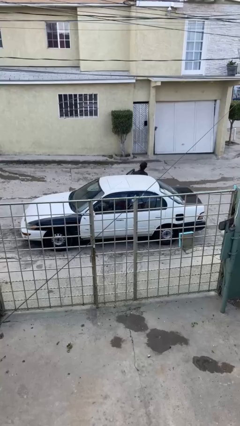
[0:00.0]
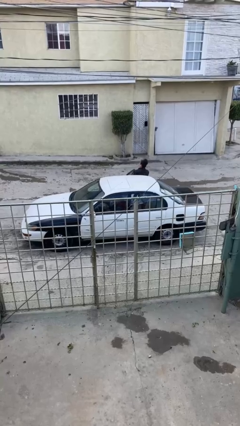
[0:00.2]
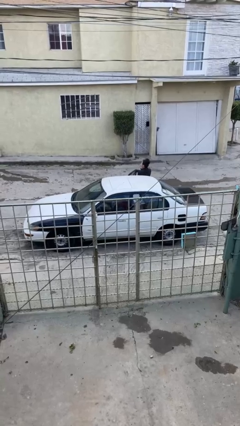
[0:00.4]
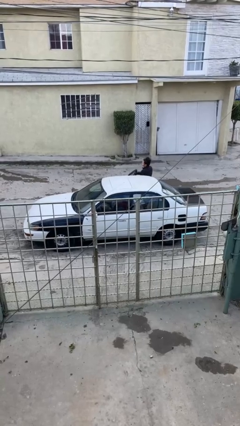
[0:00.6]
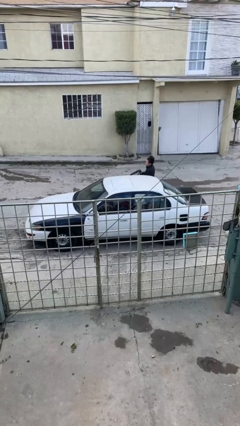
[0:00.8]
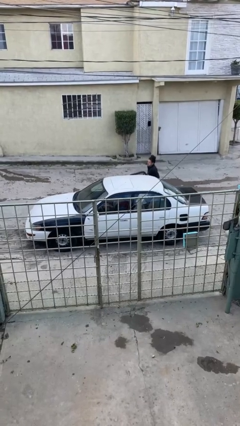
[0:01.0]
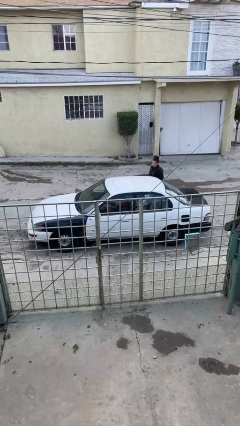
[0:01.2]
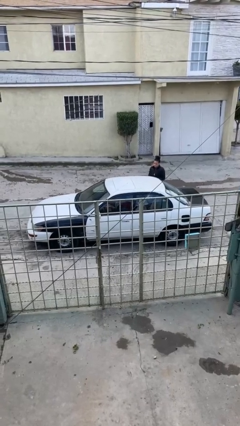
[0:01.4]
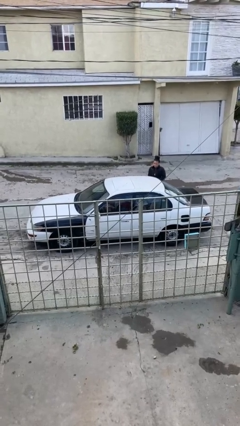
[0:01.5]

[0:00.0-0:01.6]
car drops off person

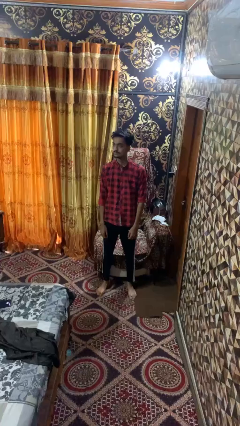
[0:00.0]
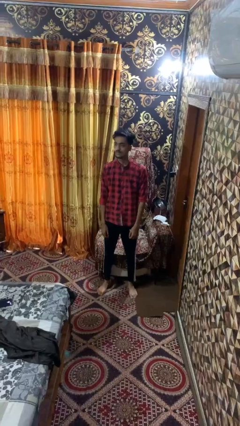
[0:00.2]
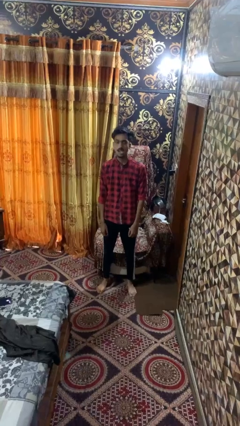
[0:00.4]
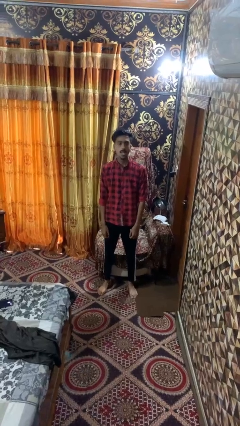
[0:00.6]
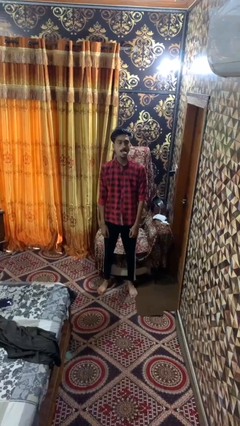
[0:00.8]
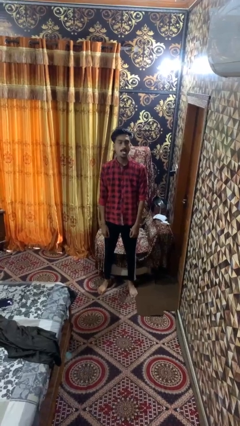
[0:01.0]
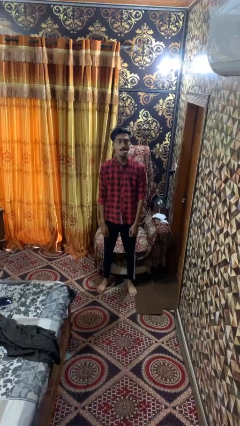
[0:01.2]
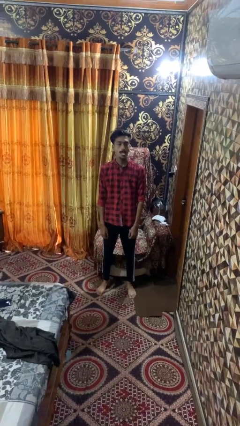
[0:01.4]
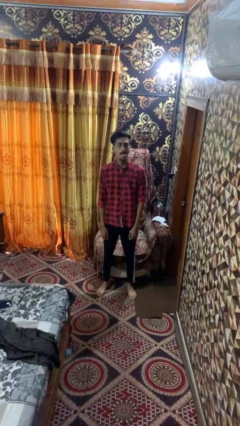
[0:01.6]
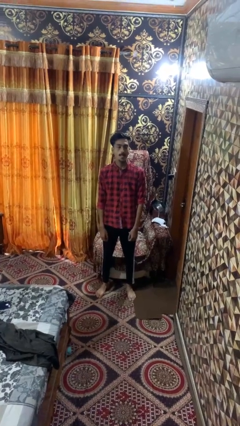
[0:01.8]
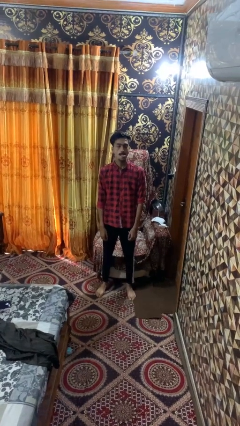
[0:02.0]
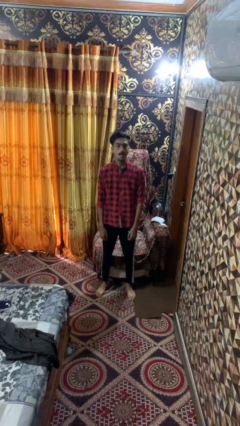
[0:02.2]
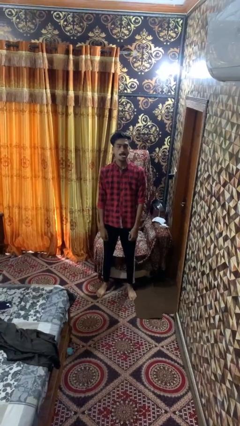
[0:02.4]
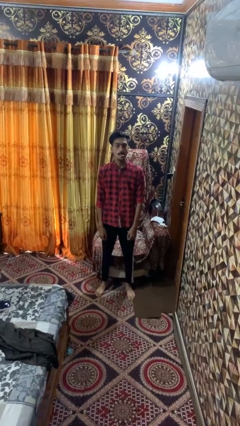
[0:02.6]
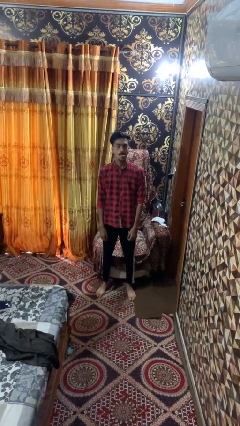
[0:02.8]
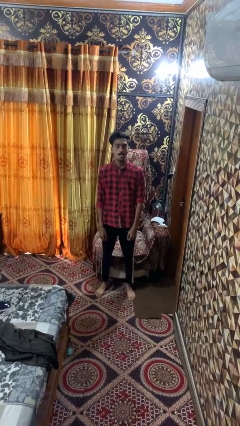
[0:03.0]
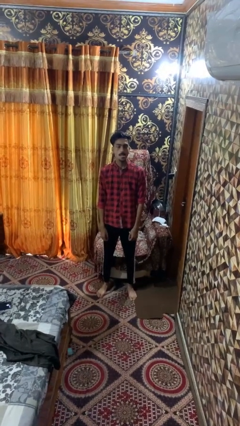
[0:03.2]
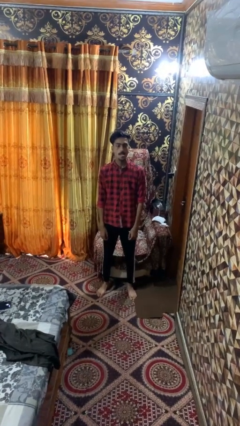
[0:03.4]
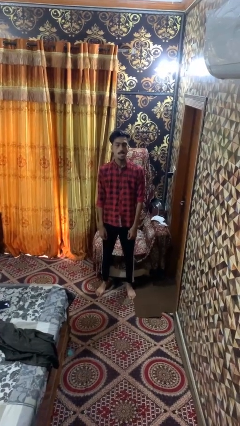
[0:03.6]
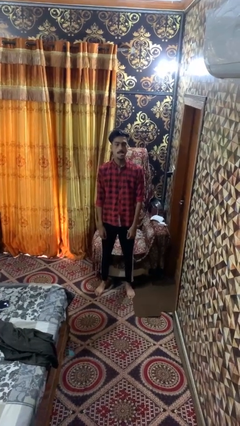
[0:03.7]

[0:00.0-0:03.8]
person sticks out tongue

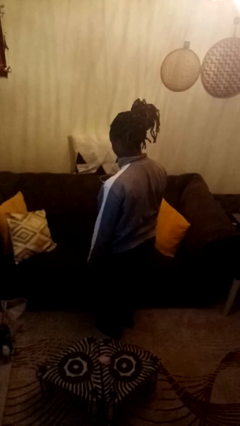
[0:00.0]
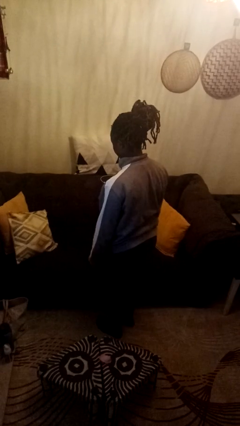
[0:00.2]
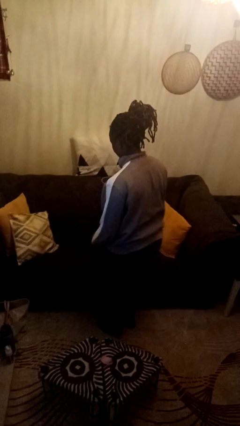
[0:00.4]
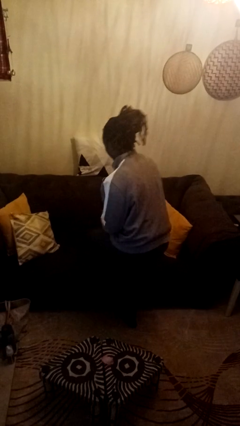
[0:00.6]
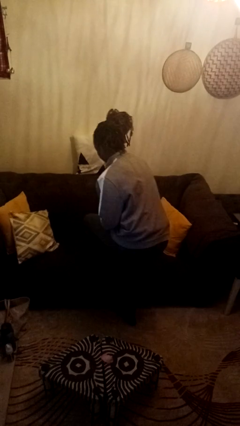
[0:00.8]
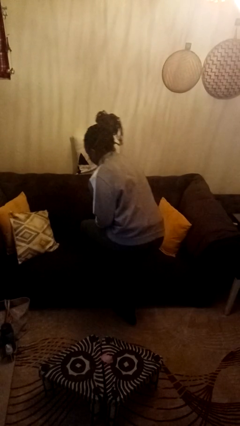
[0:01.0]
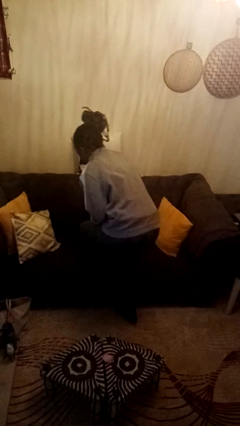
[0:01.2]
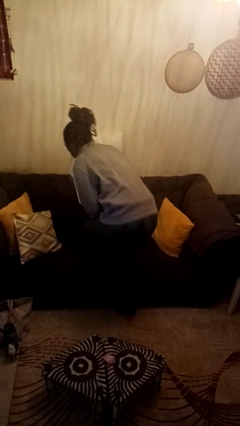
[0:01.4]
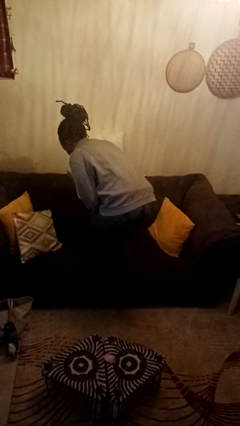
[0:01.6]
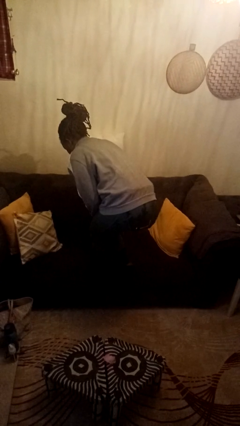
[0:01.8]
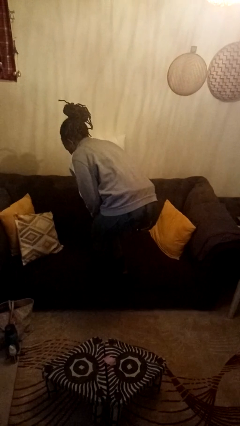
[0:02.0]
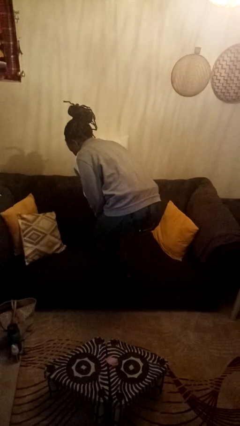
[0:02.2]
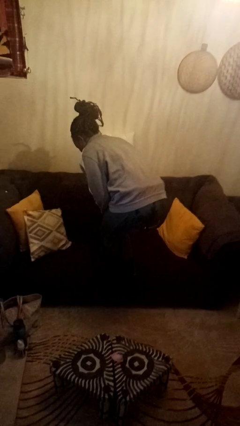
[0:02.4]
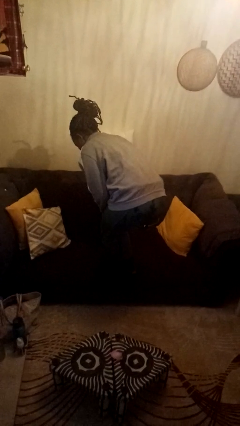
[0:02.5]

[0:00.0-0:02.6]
person climbs on couch

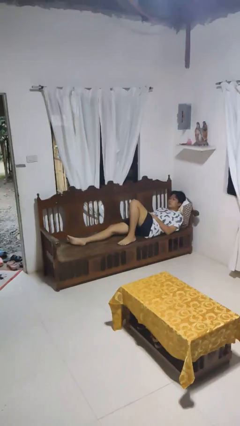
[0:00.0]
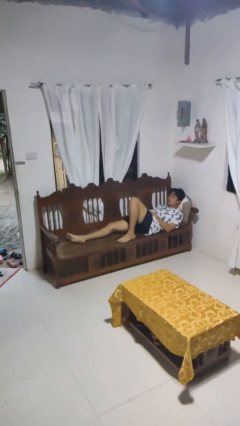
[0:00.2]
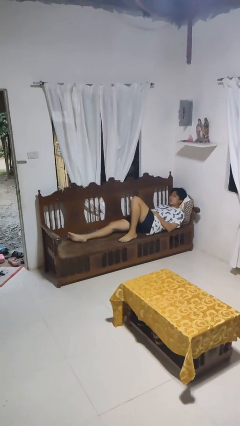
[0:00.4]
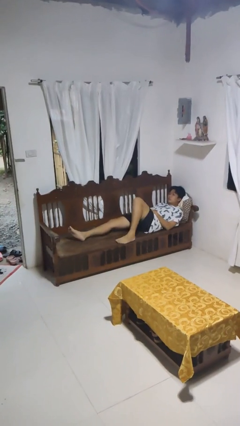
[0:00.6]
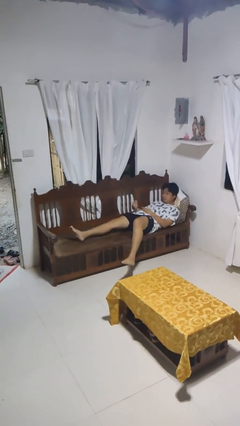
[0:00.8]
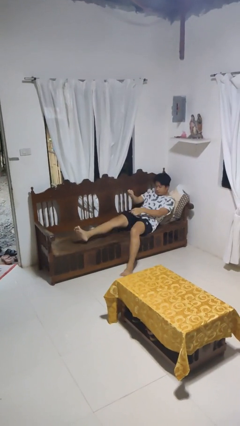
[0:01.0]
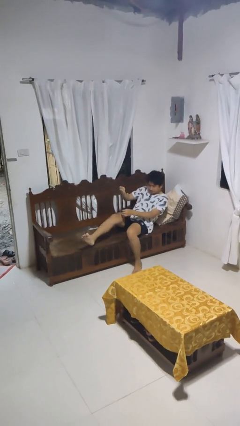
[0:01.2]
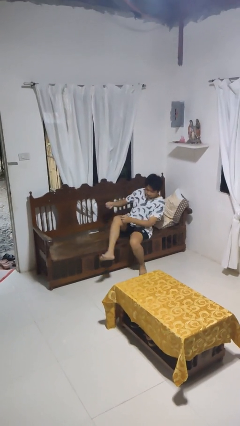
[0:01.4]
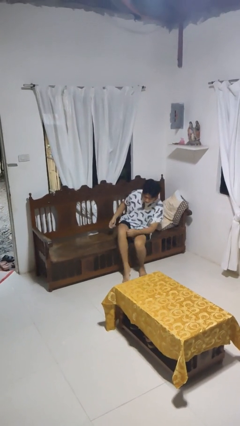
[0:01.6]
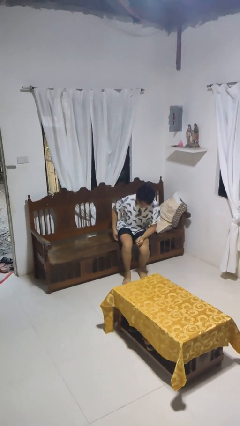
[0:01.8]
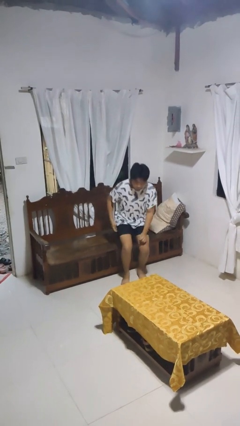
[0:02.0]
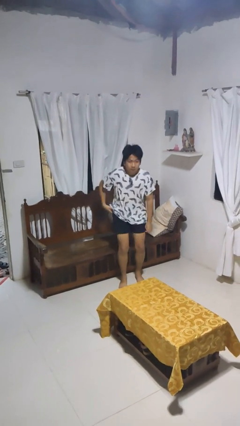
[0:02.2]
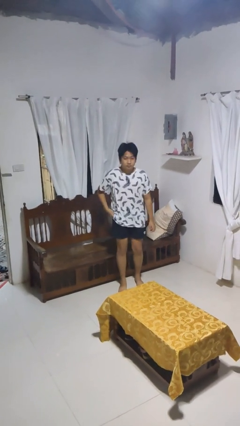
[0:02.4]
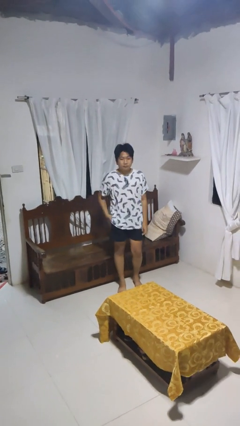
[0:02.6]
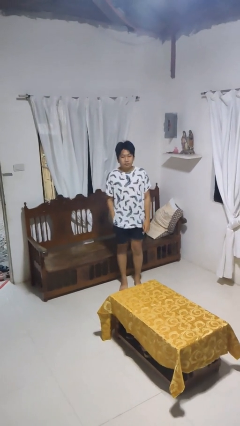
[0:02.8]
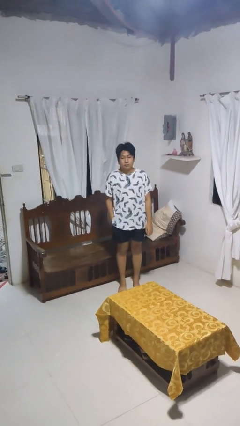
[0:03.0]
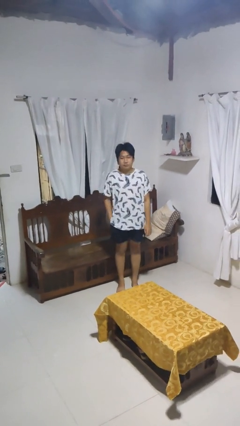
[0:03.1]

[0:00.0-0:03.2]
person stands up

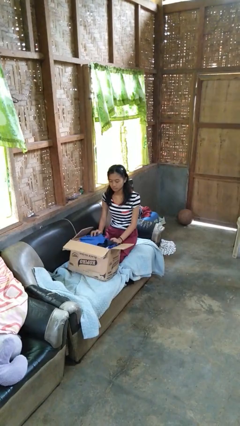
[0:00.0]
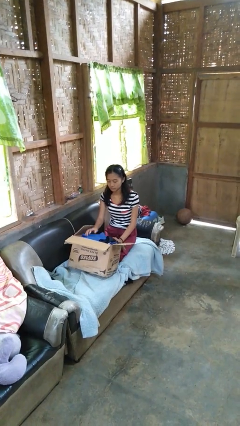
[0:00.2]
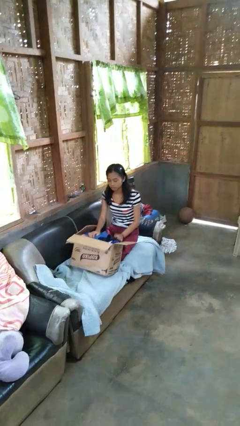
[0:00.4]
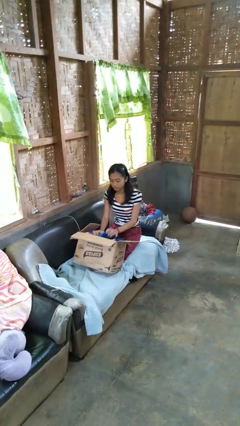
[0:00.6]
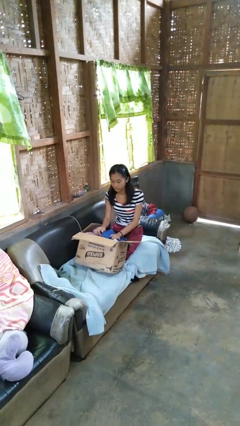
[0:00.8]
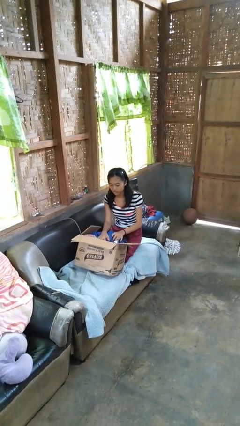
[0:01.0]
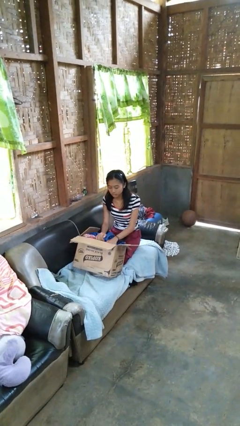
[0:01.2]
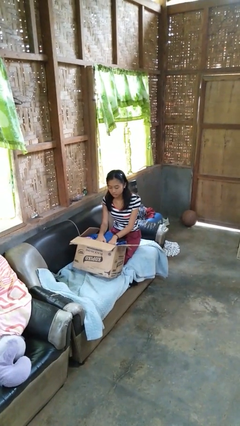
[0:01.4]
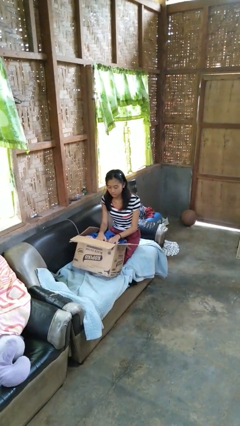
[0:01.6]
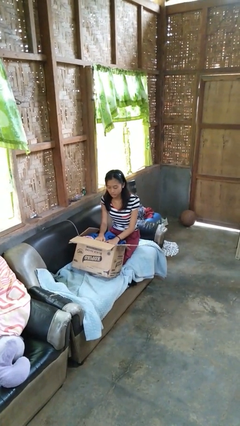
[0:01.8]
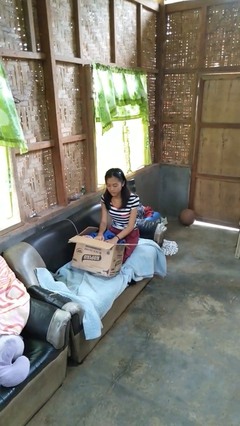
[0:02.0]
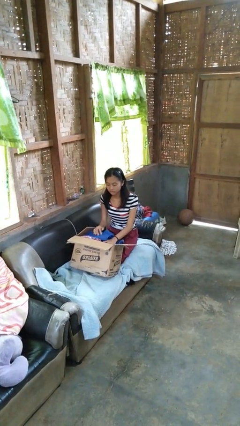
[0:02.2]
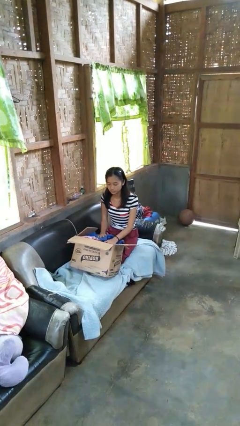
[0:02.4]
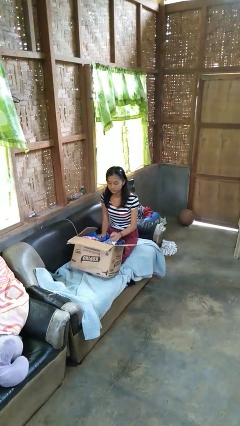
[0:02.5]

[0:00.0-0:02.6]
person searches in box

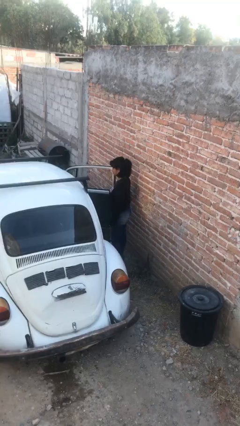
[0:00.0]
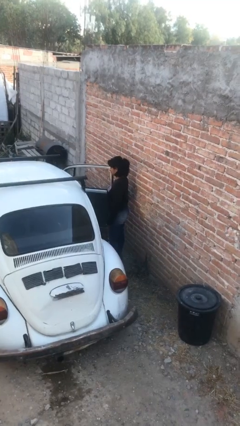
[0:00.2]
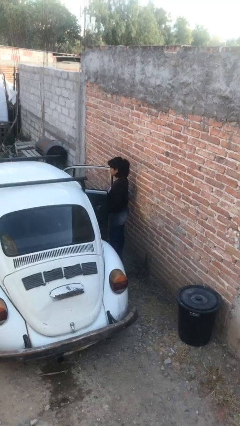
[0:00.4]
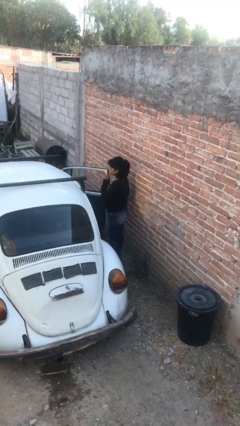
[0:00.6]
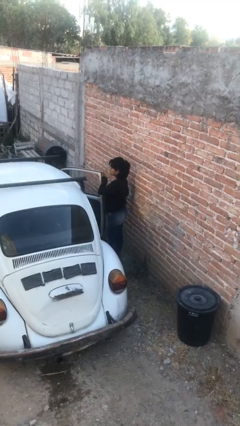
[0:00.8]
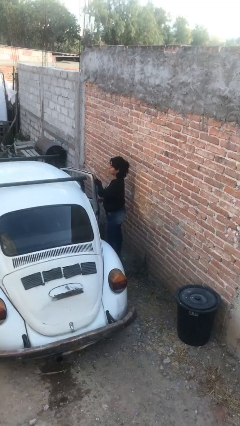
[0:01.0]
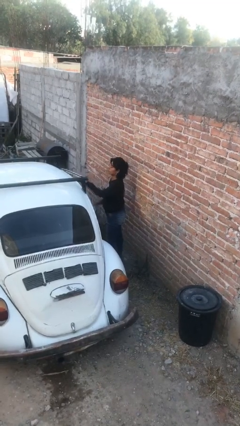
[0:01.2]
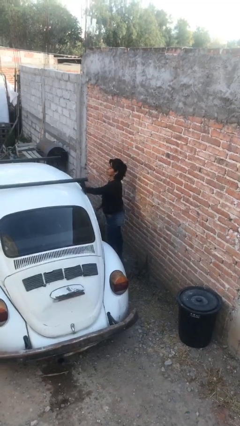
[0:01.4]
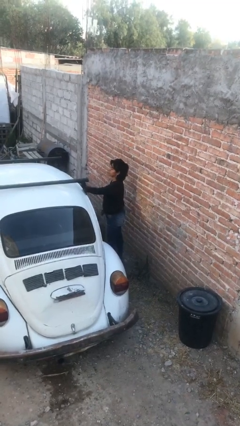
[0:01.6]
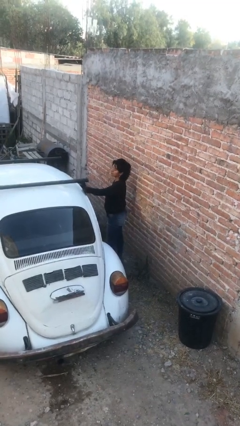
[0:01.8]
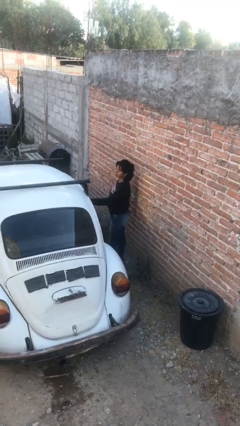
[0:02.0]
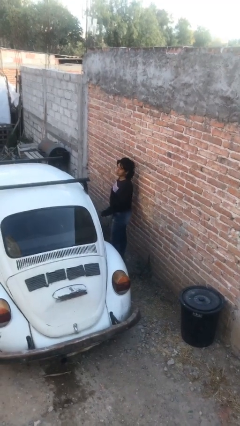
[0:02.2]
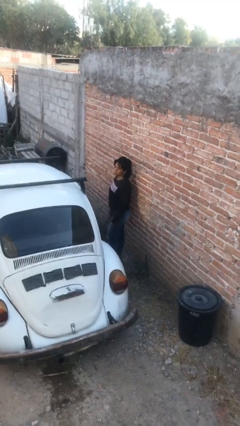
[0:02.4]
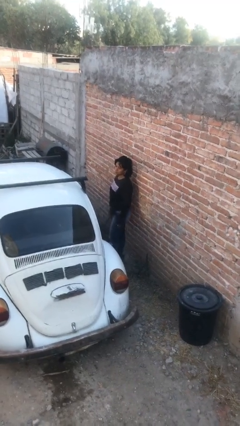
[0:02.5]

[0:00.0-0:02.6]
person closes car door

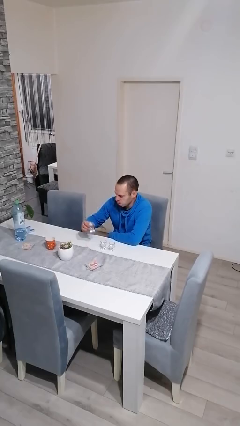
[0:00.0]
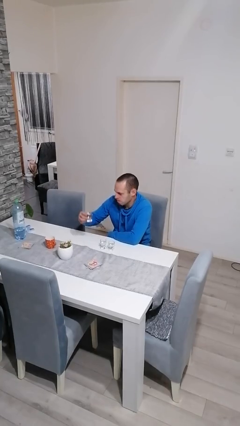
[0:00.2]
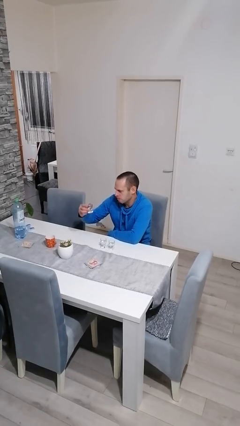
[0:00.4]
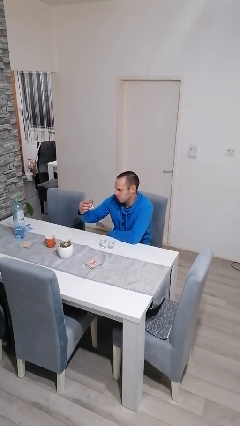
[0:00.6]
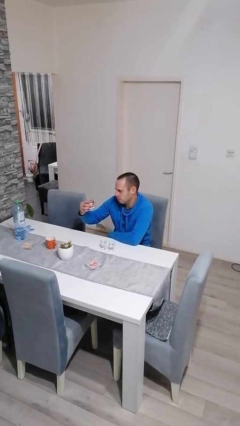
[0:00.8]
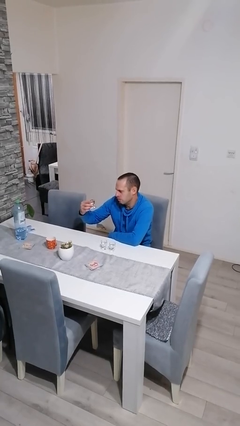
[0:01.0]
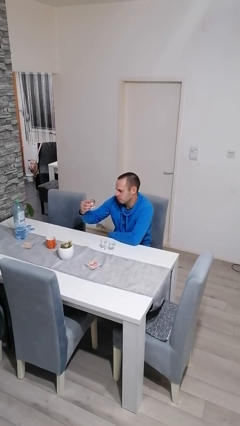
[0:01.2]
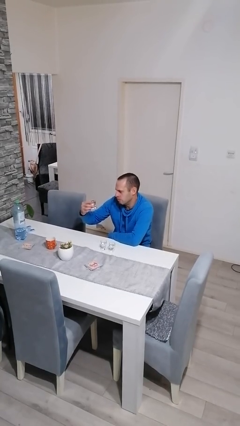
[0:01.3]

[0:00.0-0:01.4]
person picks up object from table
